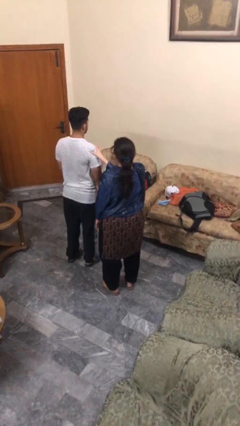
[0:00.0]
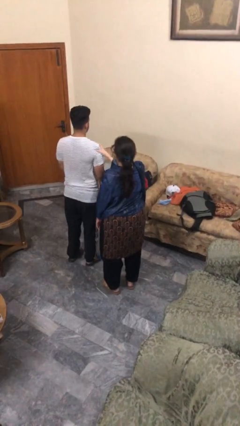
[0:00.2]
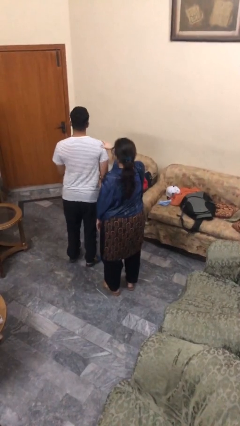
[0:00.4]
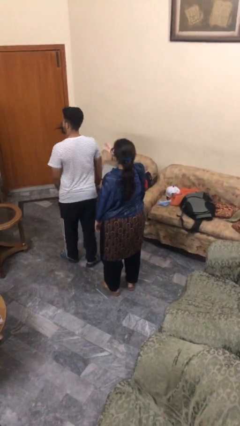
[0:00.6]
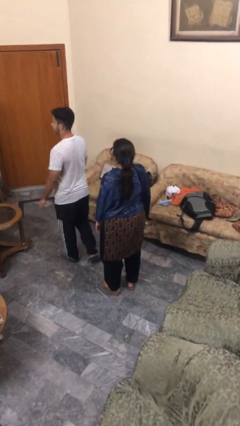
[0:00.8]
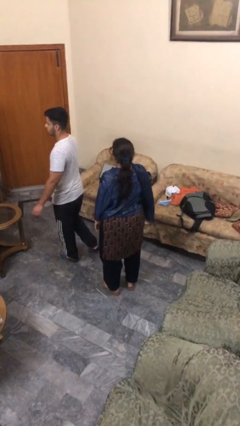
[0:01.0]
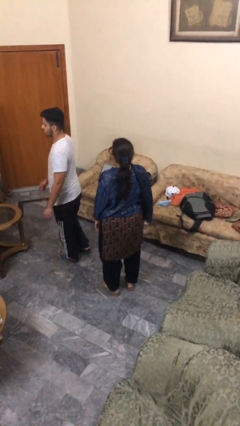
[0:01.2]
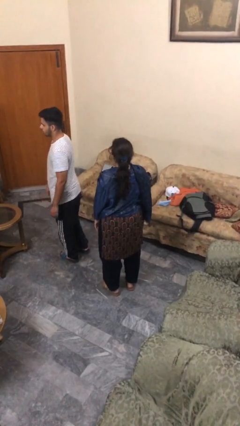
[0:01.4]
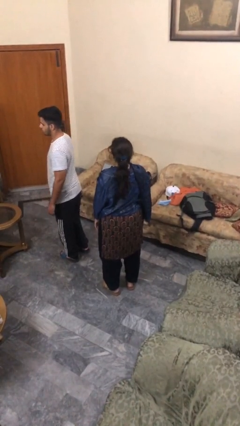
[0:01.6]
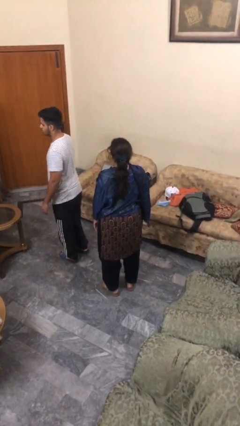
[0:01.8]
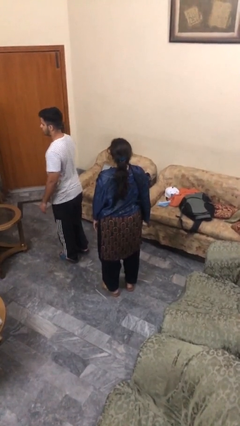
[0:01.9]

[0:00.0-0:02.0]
person spins person around

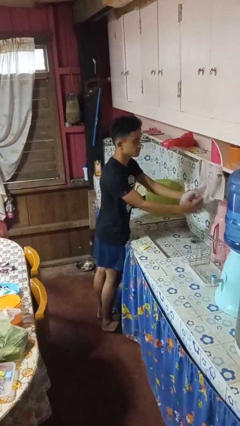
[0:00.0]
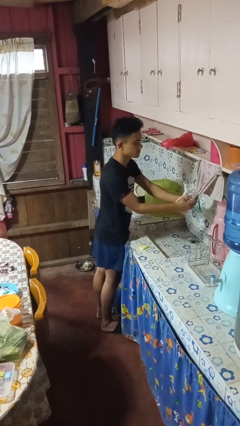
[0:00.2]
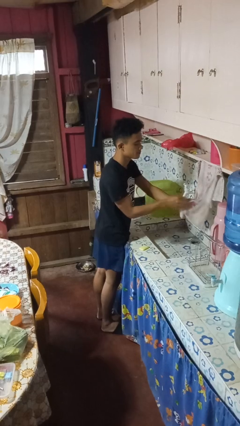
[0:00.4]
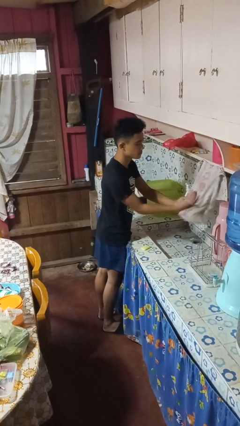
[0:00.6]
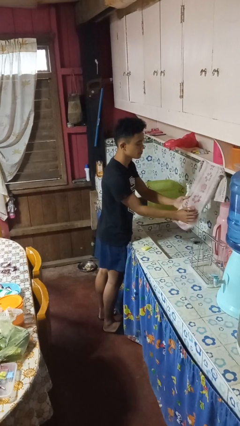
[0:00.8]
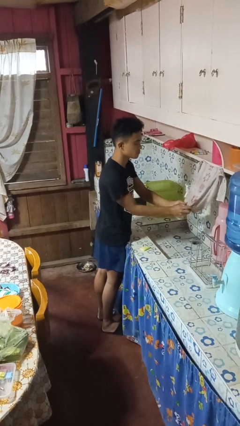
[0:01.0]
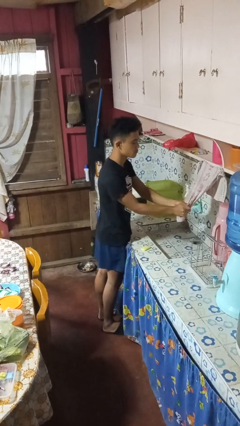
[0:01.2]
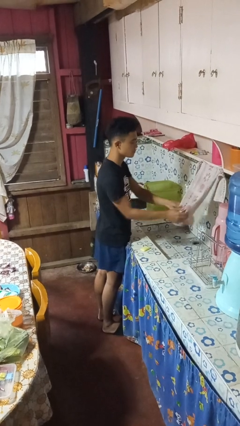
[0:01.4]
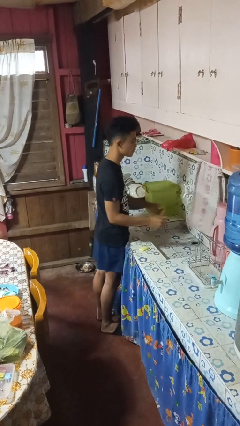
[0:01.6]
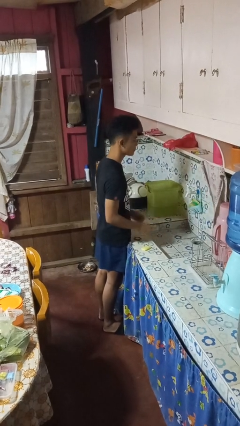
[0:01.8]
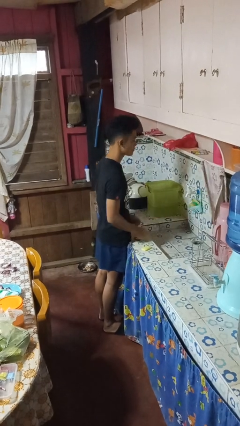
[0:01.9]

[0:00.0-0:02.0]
person dries hands with towel

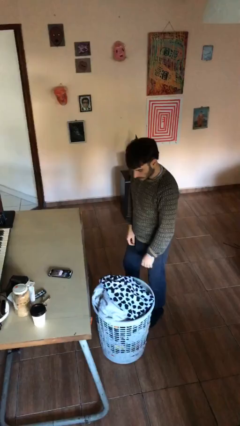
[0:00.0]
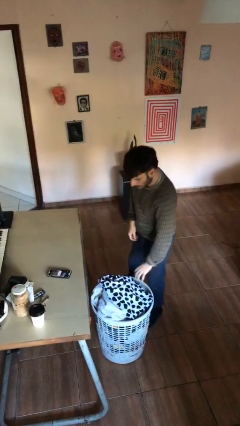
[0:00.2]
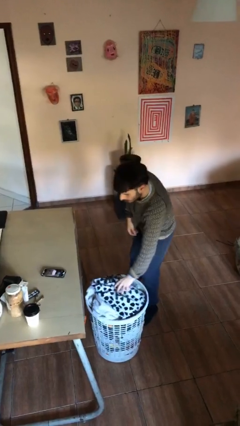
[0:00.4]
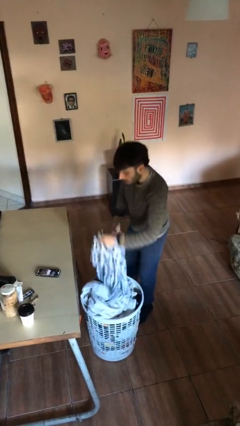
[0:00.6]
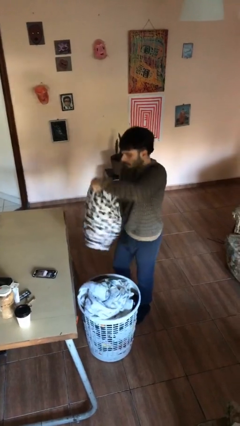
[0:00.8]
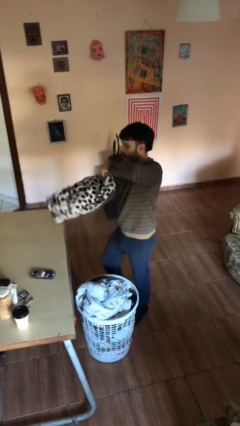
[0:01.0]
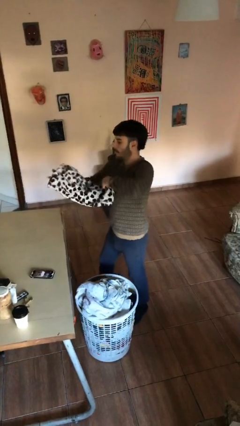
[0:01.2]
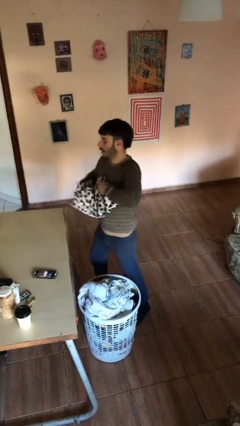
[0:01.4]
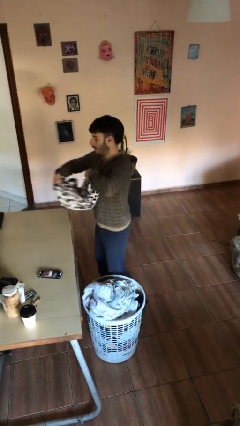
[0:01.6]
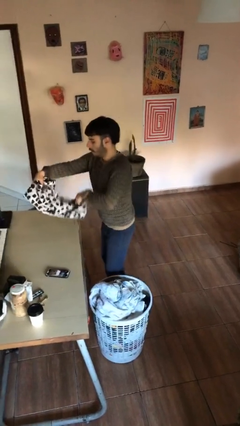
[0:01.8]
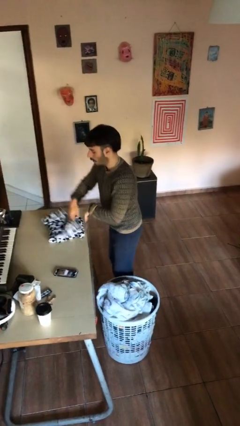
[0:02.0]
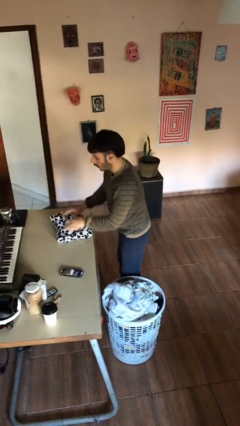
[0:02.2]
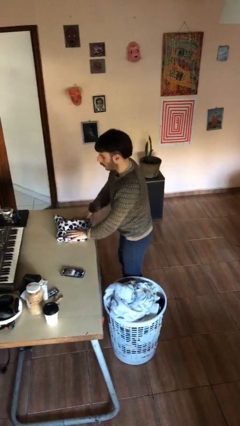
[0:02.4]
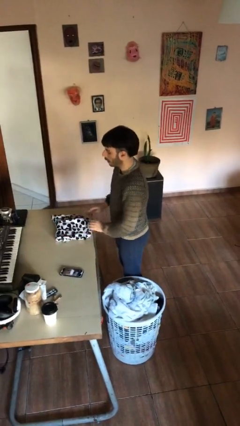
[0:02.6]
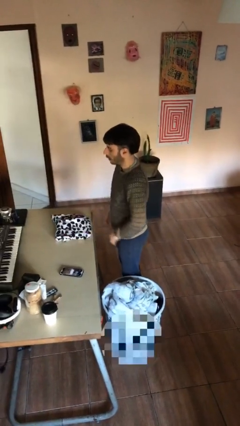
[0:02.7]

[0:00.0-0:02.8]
person folds pants
